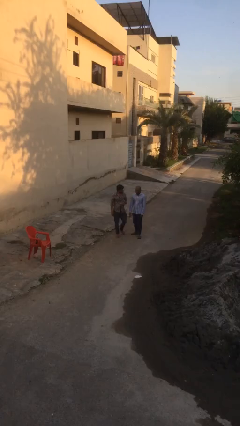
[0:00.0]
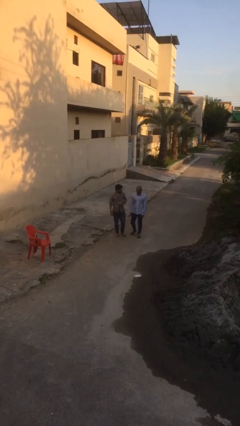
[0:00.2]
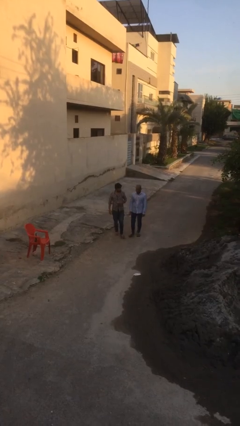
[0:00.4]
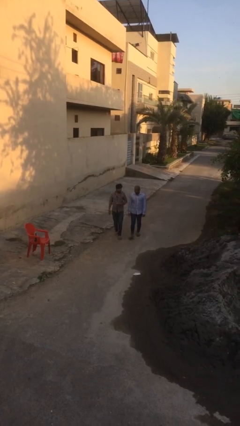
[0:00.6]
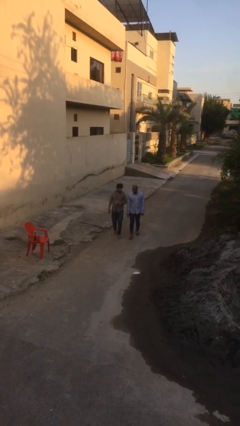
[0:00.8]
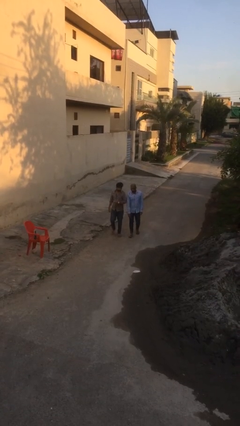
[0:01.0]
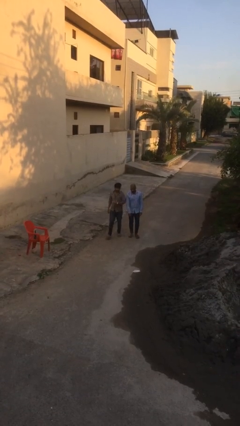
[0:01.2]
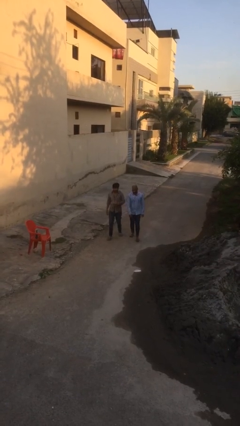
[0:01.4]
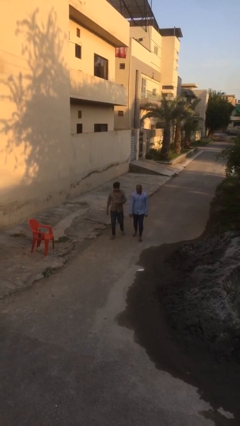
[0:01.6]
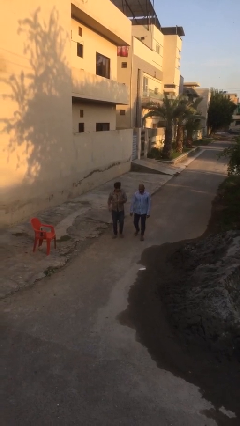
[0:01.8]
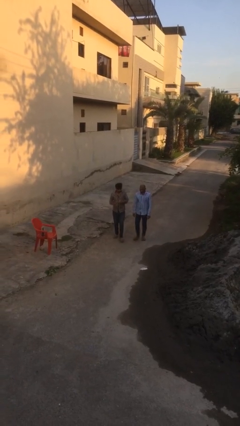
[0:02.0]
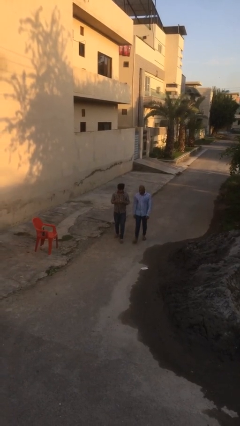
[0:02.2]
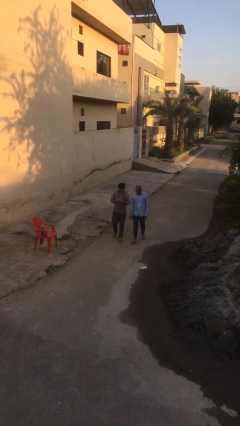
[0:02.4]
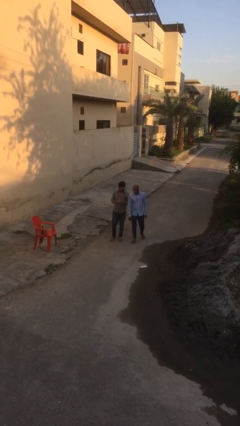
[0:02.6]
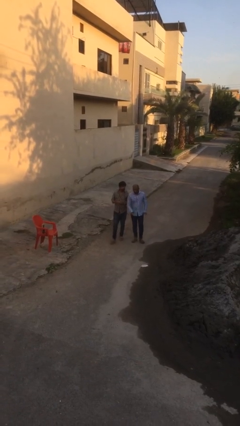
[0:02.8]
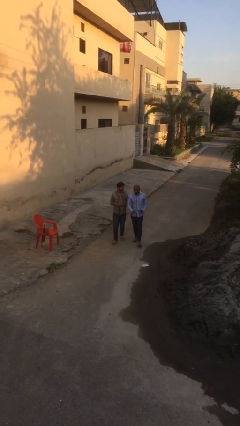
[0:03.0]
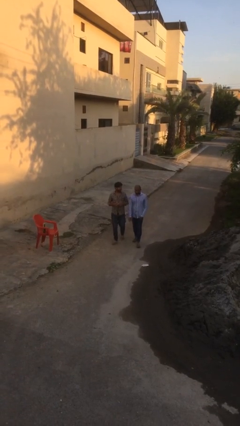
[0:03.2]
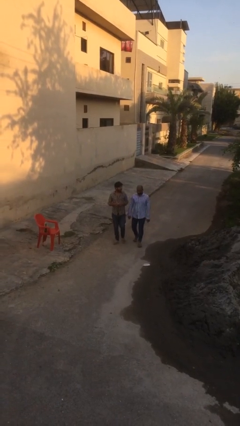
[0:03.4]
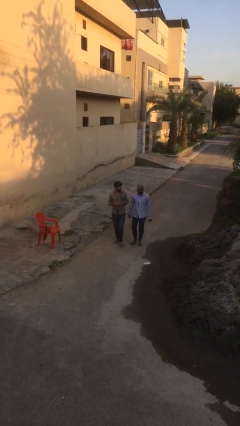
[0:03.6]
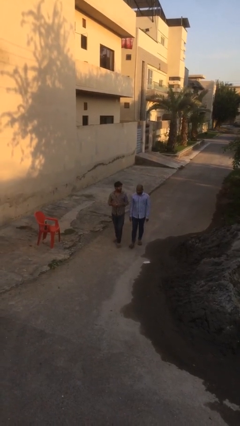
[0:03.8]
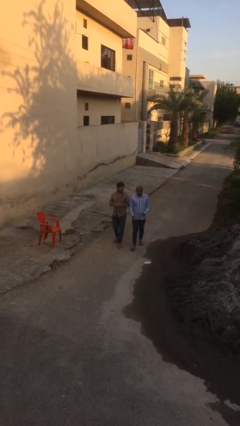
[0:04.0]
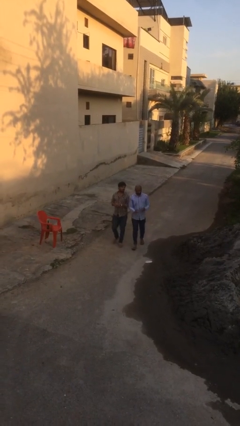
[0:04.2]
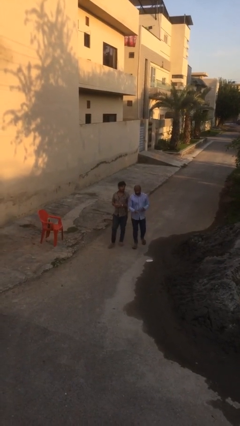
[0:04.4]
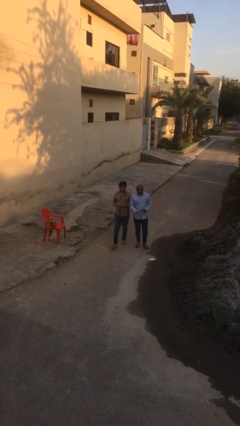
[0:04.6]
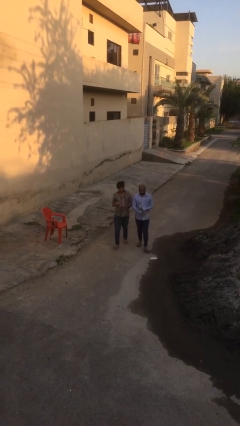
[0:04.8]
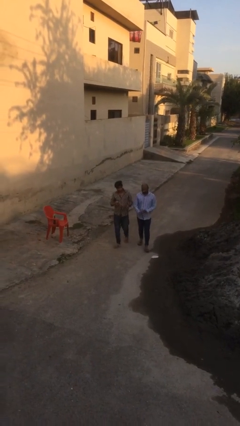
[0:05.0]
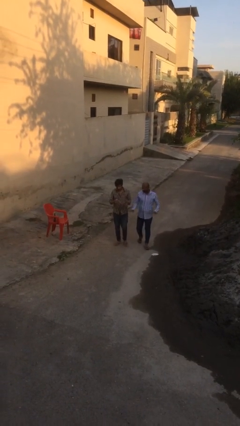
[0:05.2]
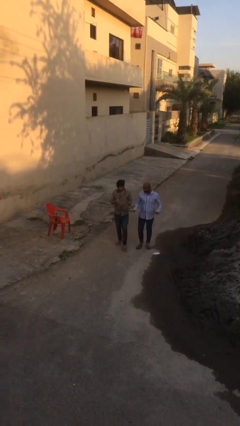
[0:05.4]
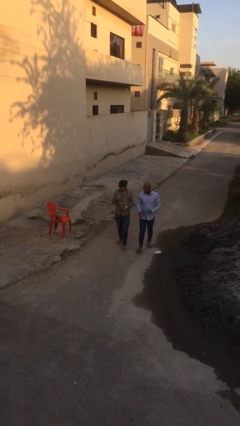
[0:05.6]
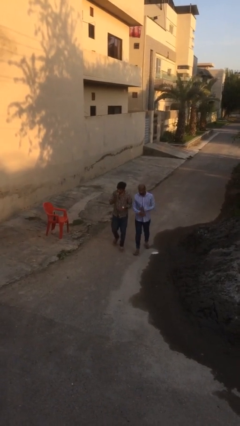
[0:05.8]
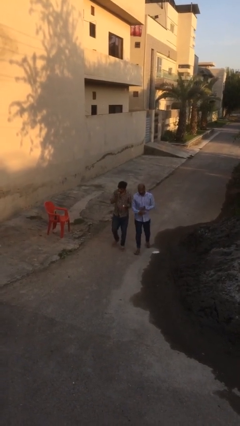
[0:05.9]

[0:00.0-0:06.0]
person talks to person

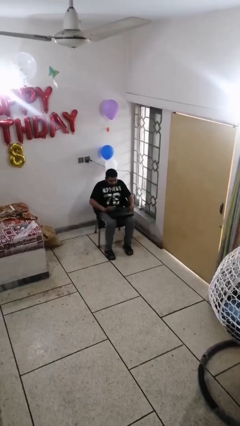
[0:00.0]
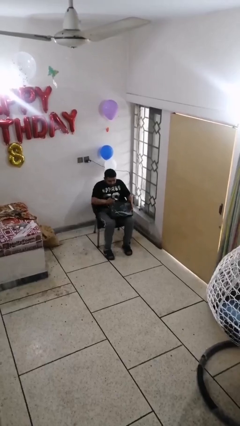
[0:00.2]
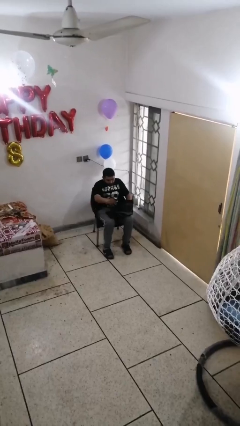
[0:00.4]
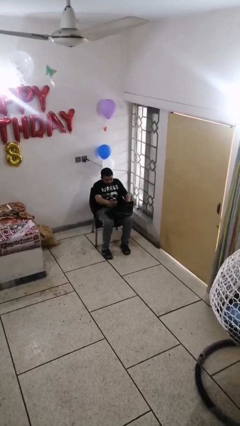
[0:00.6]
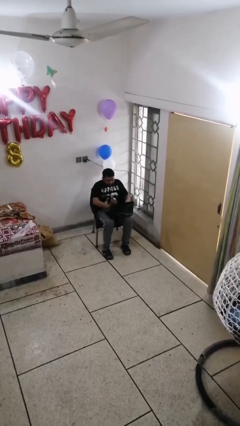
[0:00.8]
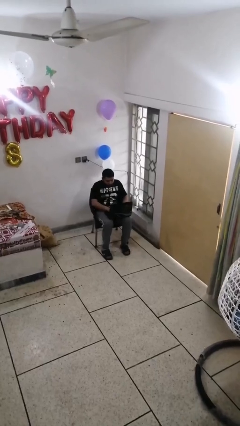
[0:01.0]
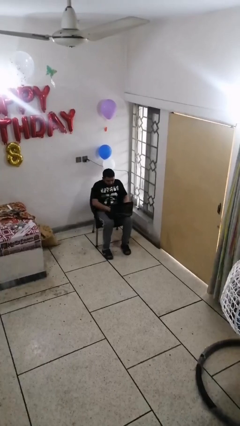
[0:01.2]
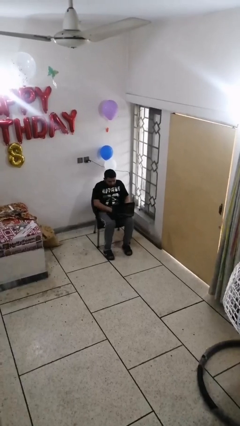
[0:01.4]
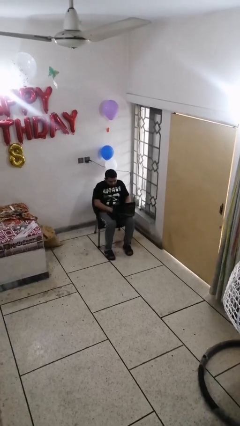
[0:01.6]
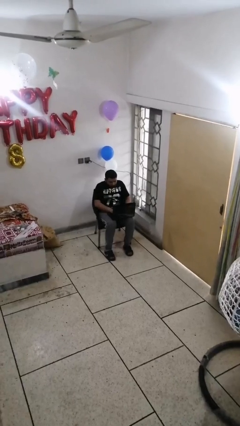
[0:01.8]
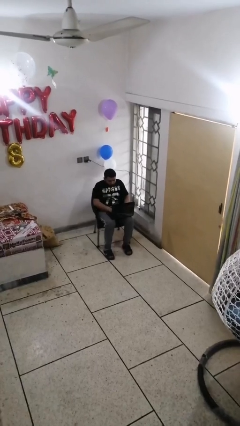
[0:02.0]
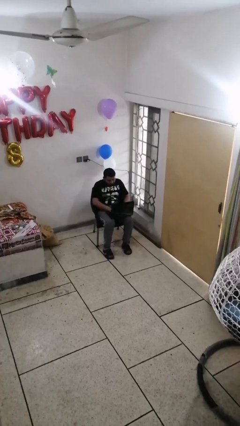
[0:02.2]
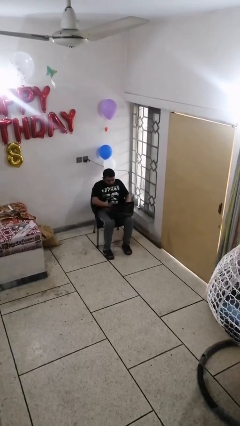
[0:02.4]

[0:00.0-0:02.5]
person interacts with laptop

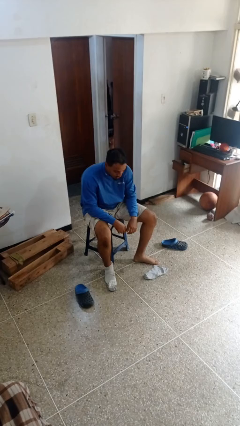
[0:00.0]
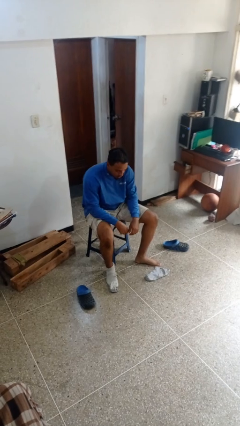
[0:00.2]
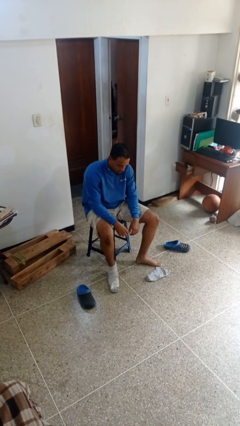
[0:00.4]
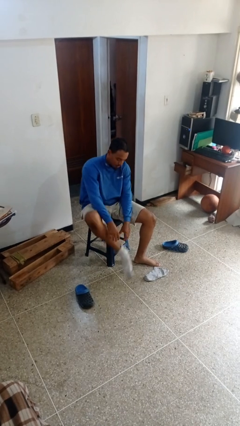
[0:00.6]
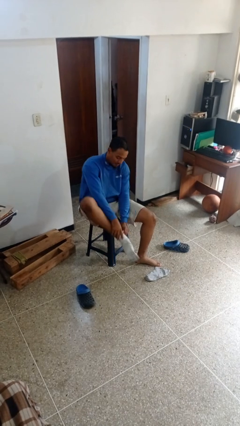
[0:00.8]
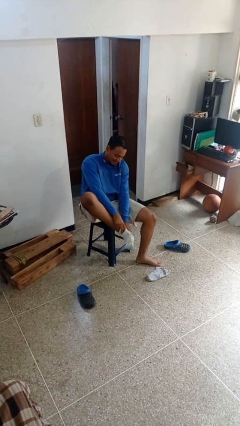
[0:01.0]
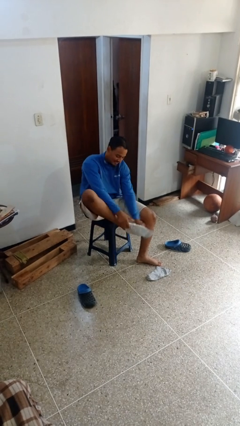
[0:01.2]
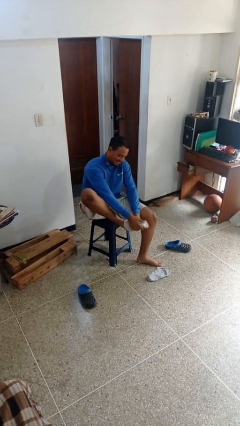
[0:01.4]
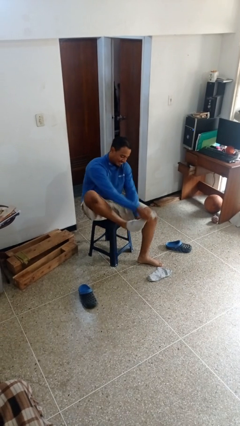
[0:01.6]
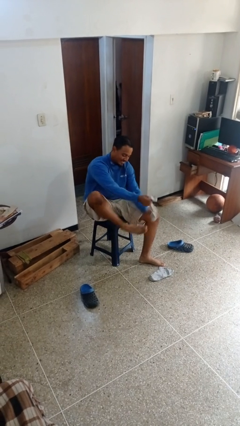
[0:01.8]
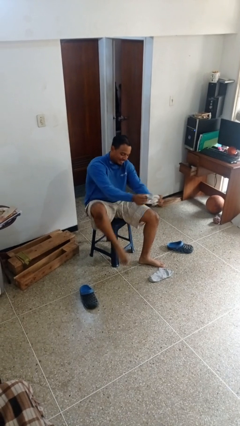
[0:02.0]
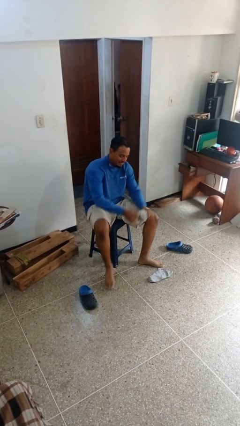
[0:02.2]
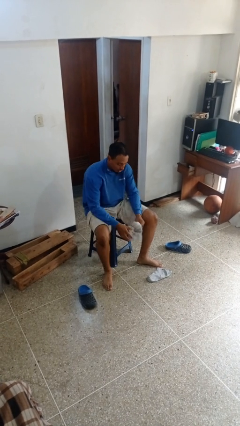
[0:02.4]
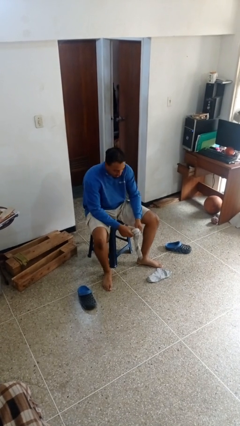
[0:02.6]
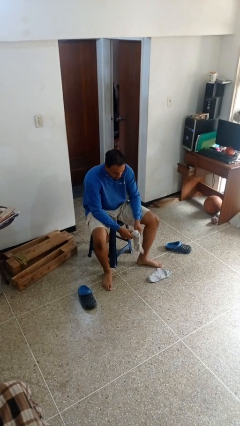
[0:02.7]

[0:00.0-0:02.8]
person takes off socks

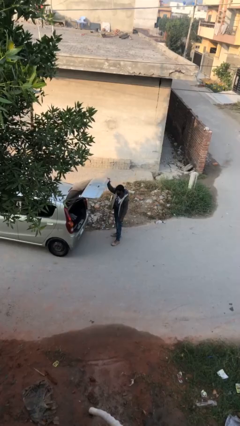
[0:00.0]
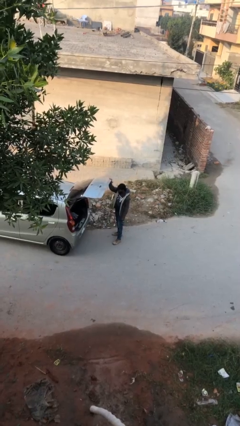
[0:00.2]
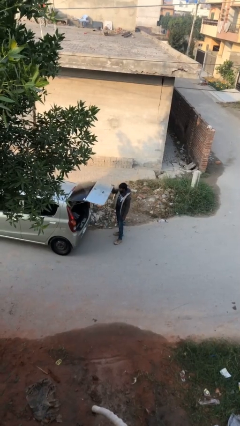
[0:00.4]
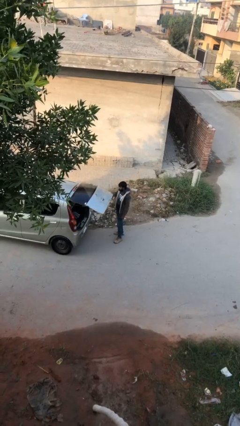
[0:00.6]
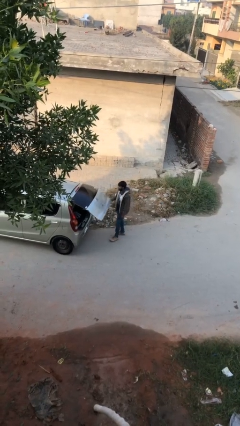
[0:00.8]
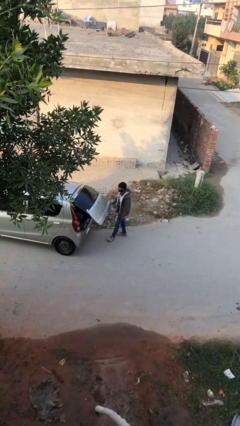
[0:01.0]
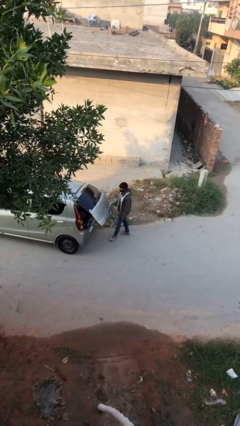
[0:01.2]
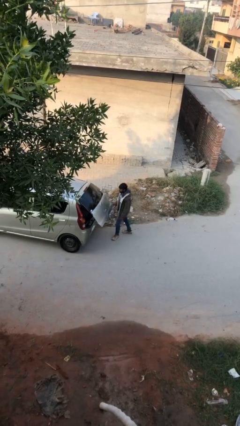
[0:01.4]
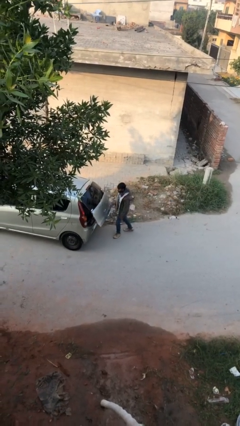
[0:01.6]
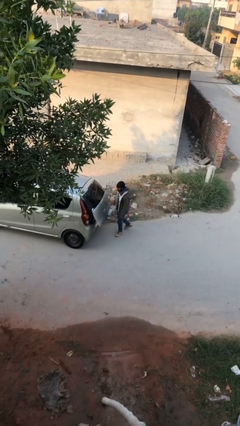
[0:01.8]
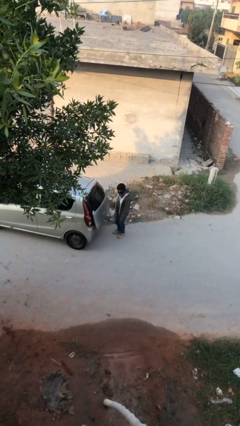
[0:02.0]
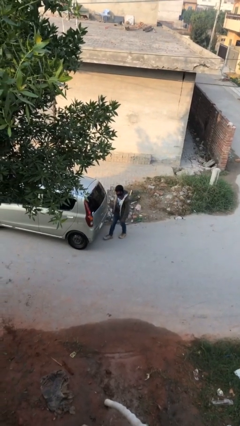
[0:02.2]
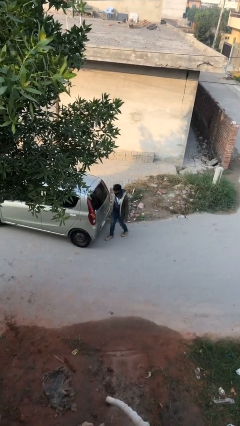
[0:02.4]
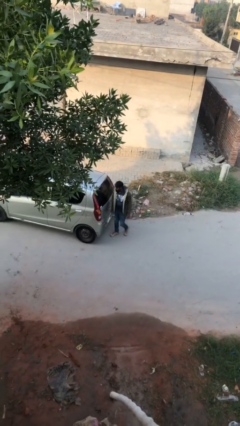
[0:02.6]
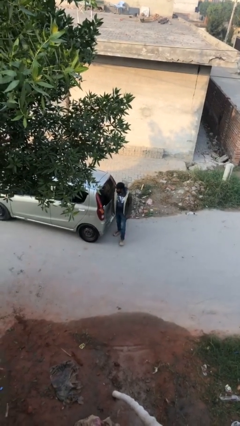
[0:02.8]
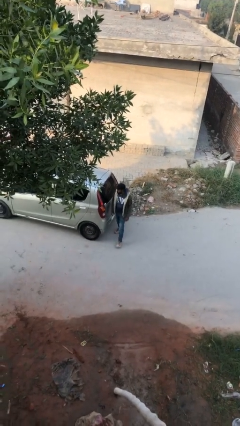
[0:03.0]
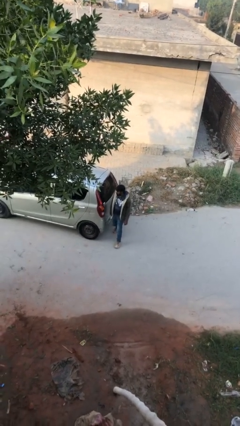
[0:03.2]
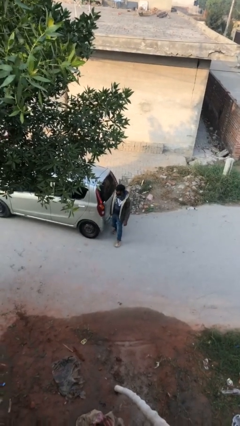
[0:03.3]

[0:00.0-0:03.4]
person closes car trunk

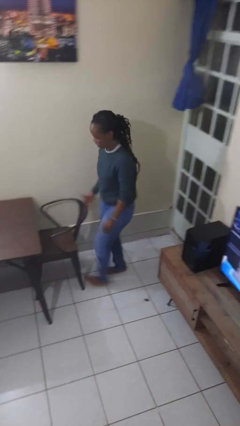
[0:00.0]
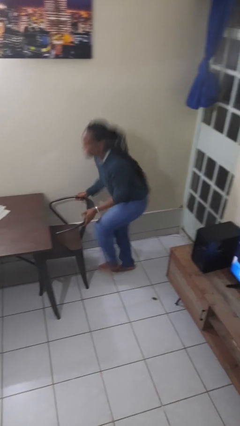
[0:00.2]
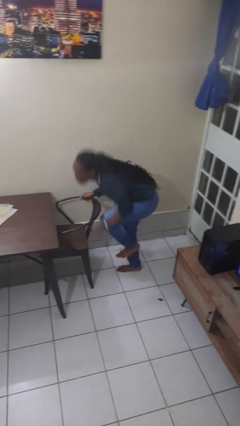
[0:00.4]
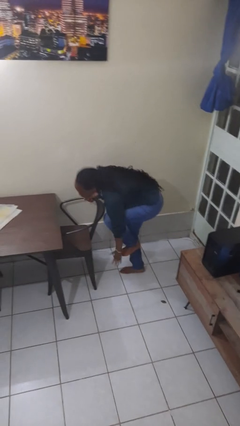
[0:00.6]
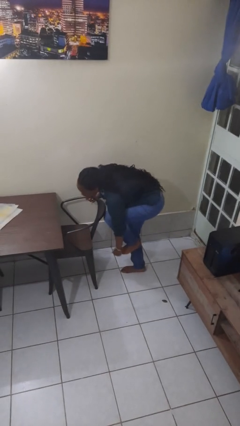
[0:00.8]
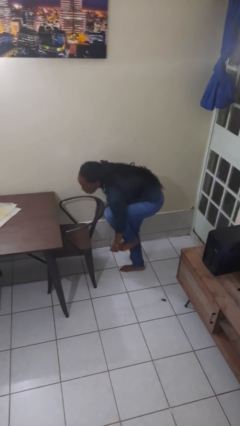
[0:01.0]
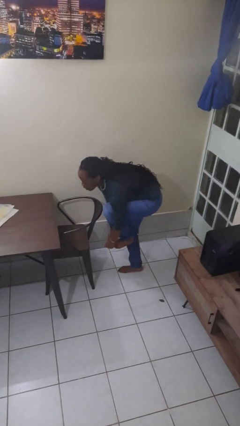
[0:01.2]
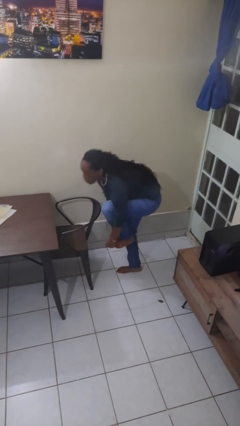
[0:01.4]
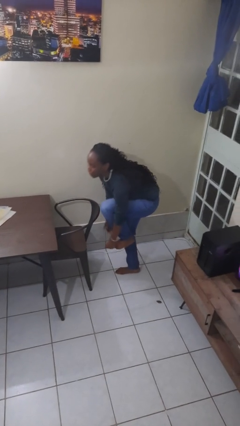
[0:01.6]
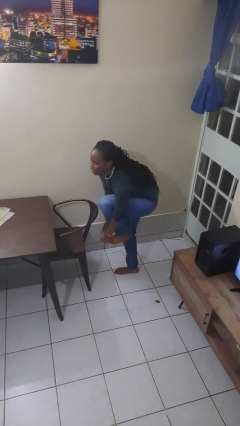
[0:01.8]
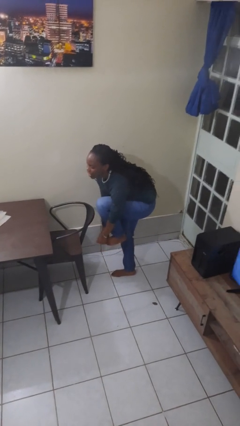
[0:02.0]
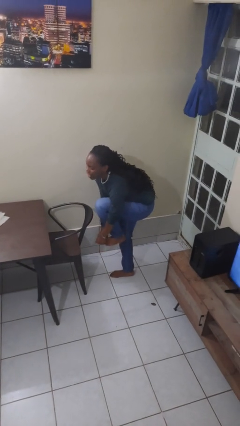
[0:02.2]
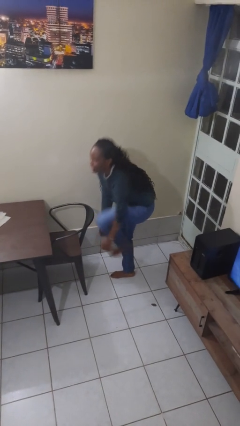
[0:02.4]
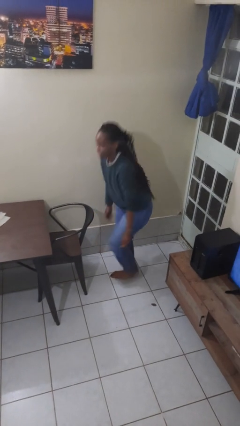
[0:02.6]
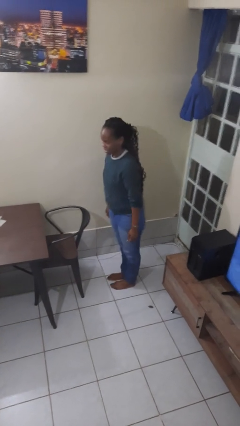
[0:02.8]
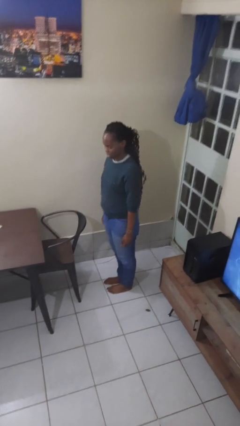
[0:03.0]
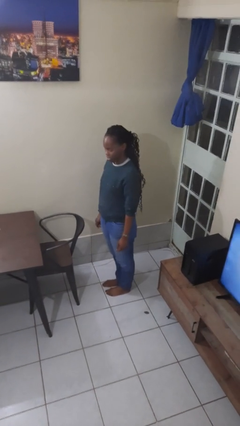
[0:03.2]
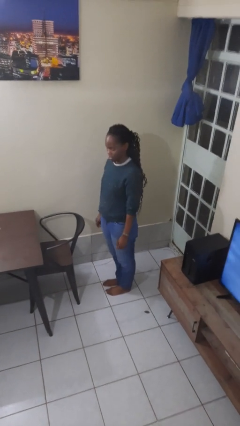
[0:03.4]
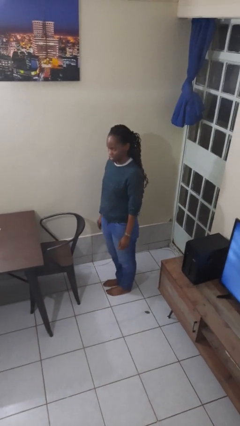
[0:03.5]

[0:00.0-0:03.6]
person stubs toe
